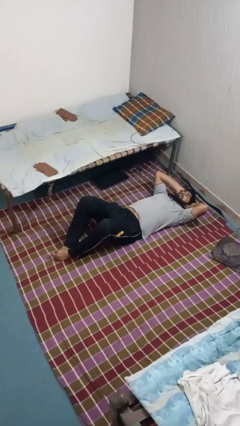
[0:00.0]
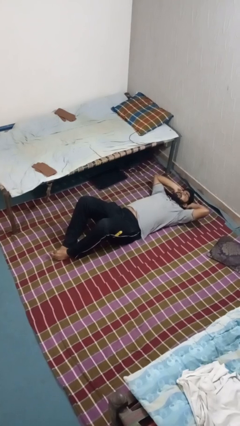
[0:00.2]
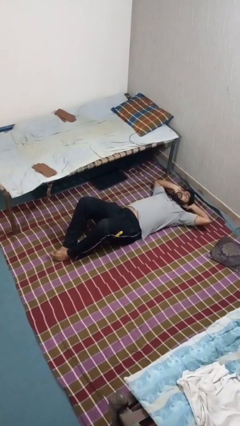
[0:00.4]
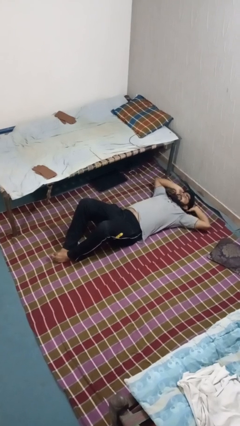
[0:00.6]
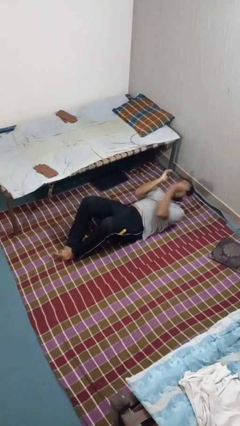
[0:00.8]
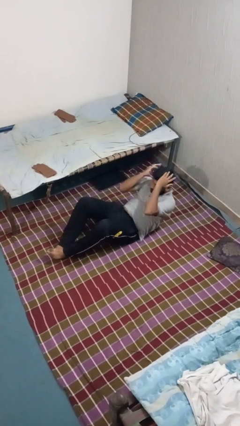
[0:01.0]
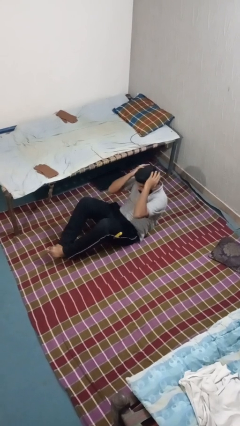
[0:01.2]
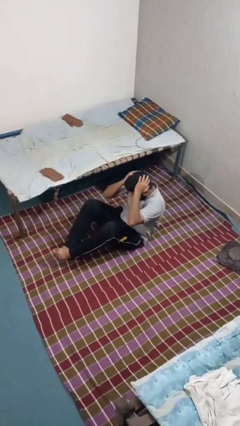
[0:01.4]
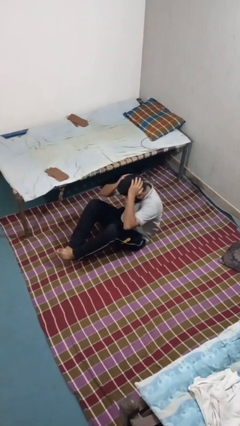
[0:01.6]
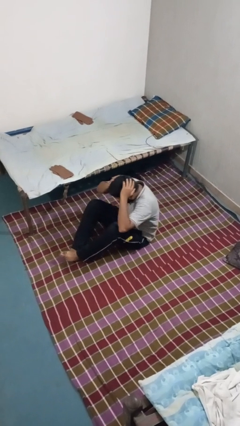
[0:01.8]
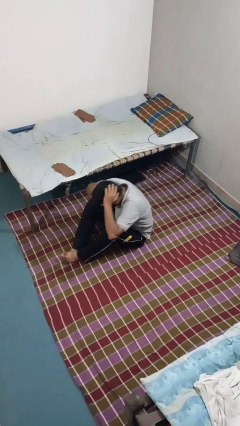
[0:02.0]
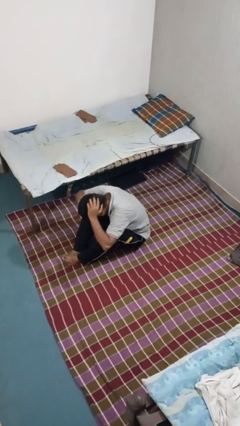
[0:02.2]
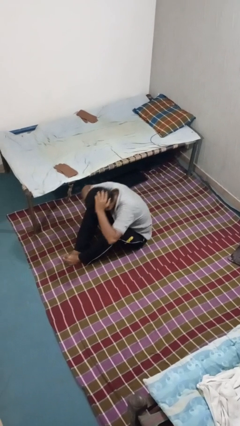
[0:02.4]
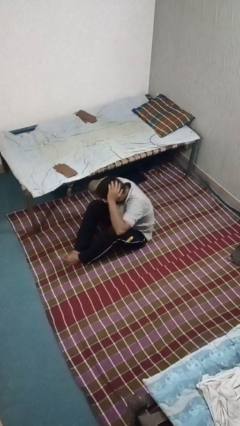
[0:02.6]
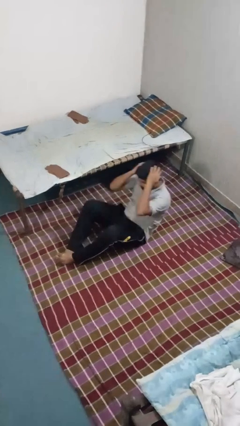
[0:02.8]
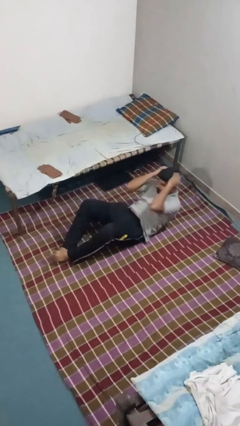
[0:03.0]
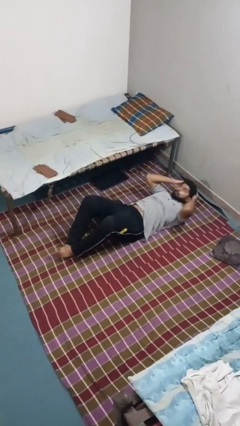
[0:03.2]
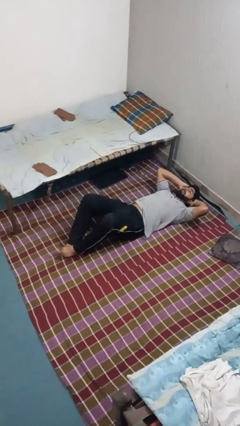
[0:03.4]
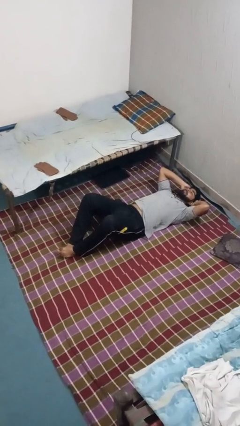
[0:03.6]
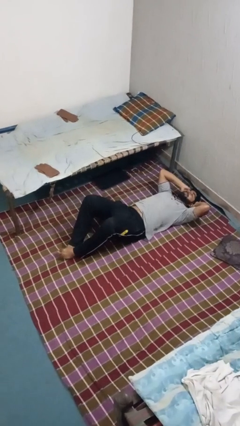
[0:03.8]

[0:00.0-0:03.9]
person exercises with situp

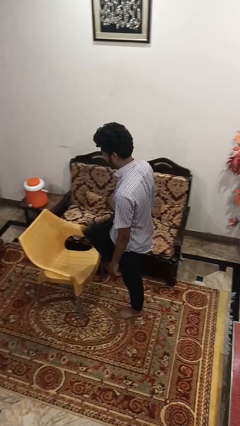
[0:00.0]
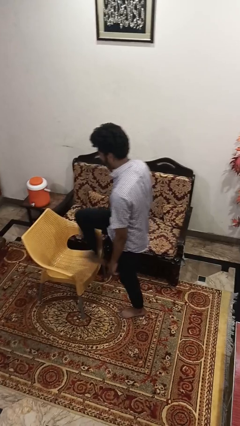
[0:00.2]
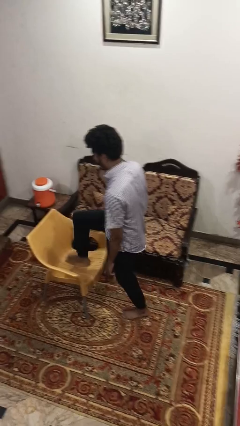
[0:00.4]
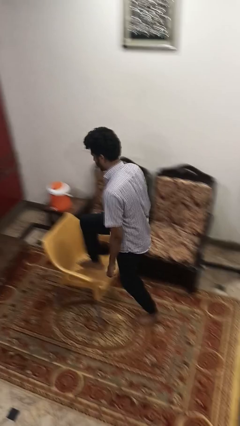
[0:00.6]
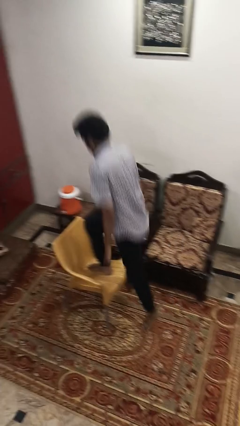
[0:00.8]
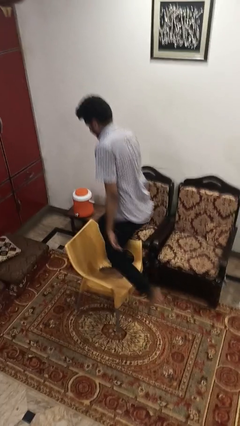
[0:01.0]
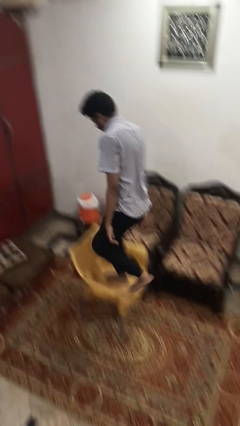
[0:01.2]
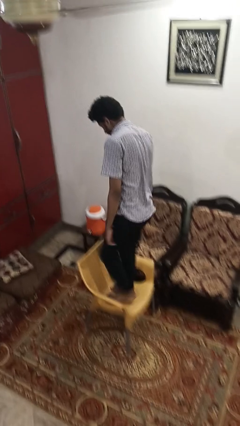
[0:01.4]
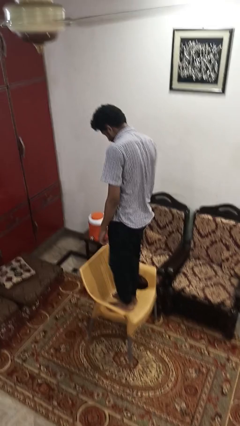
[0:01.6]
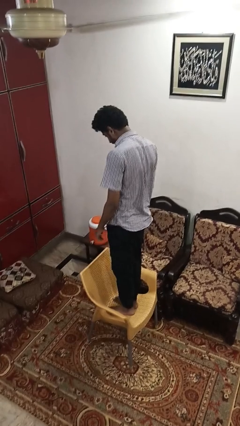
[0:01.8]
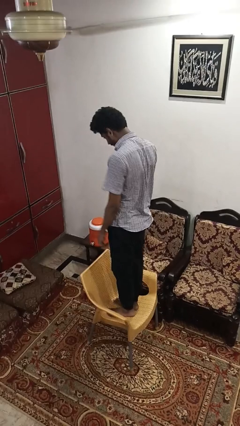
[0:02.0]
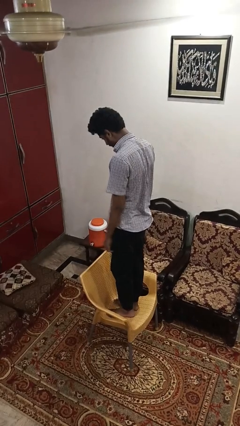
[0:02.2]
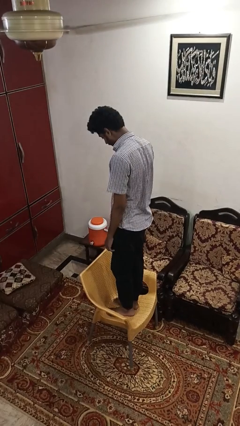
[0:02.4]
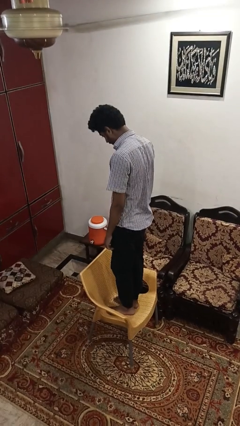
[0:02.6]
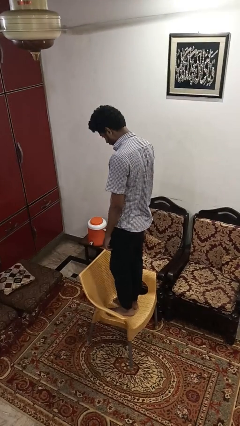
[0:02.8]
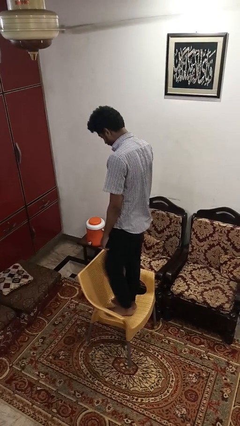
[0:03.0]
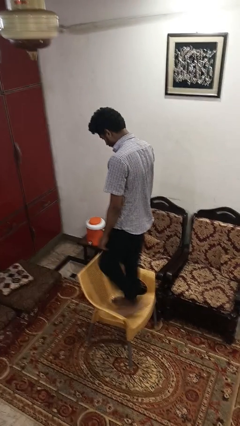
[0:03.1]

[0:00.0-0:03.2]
person climbs on chair

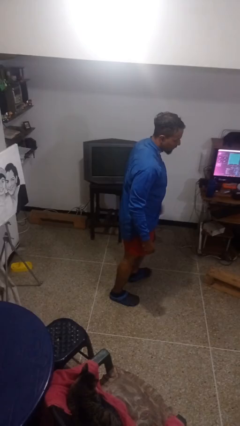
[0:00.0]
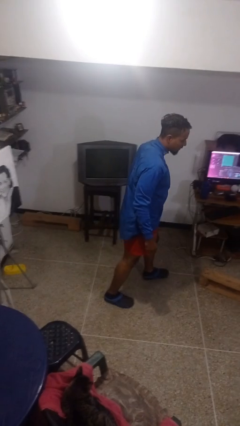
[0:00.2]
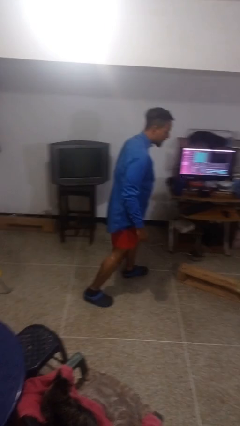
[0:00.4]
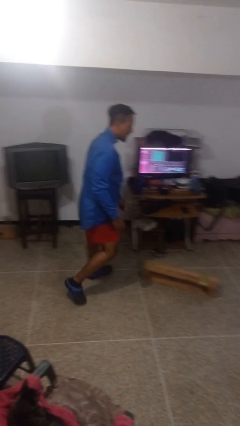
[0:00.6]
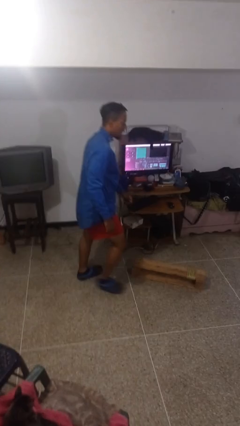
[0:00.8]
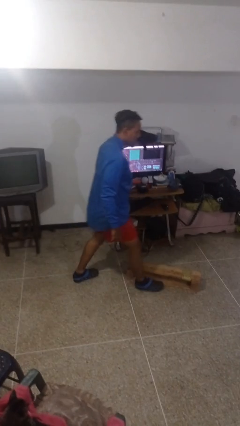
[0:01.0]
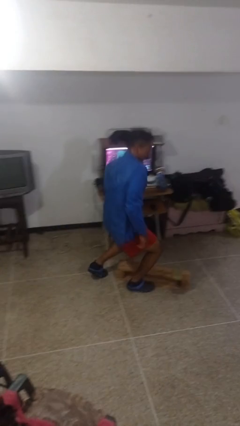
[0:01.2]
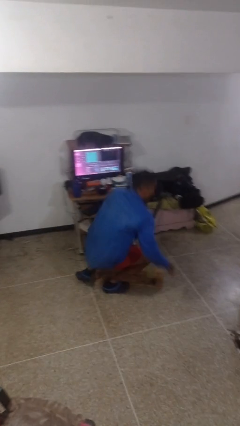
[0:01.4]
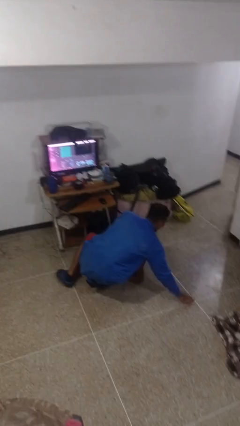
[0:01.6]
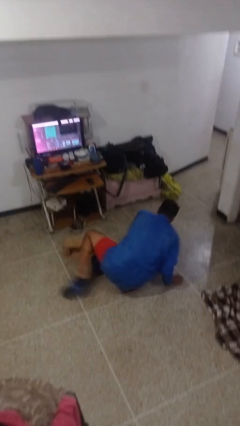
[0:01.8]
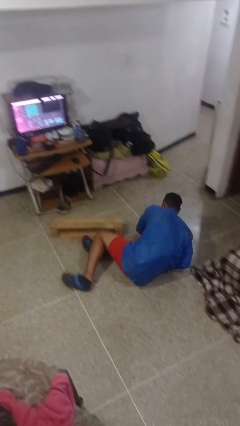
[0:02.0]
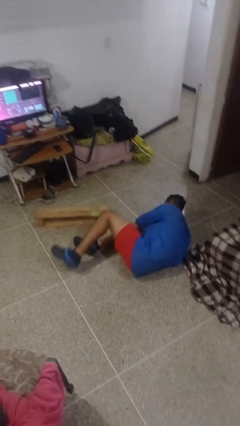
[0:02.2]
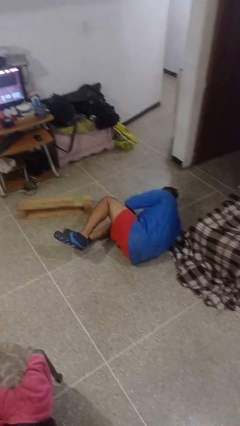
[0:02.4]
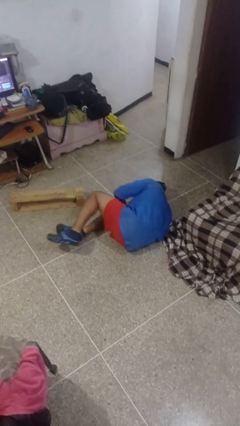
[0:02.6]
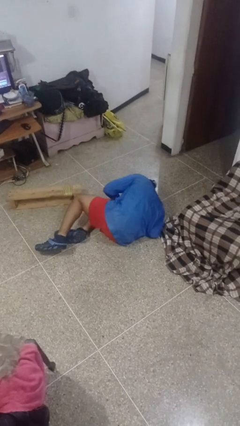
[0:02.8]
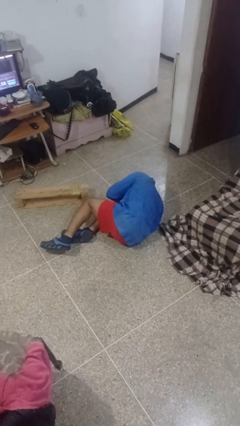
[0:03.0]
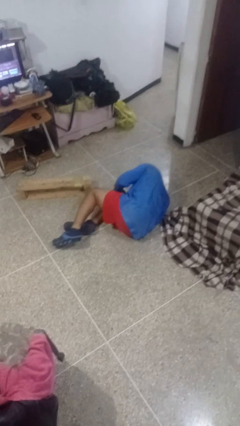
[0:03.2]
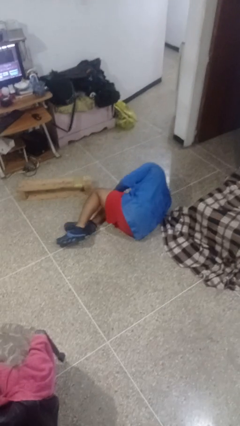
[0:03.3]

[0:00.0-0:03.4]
person trips on object on floor

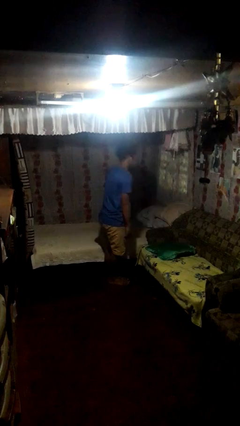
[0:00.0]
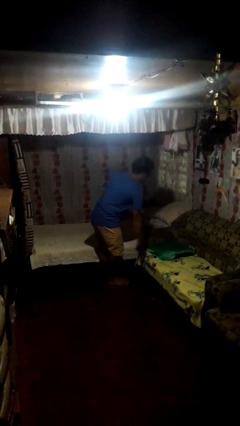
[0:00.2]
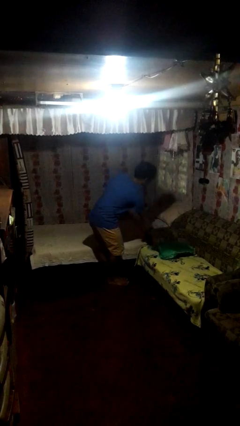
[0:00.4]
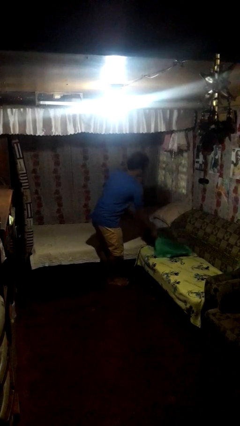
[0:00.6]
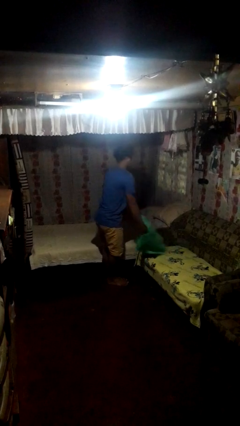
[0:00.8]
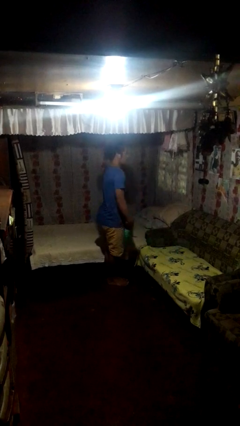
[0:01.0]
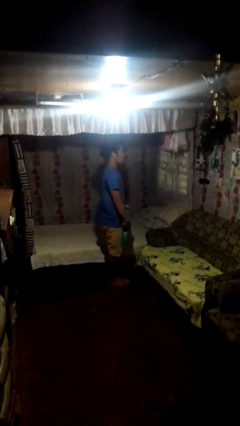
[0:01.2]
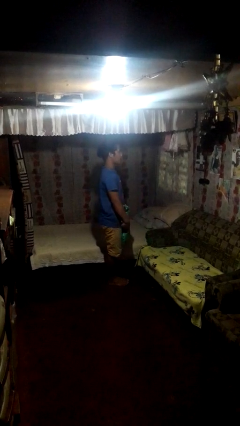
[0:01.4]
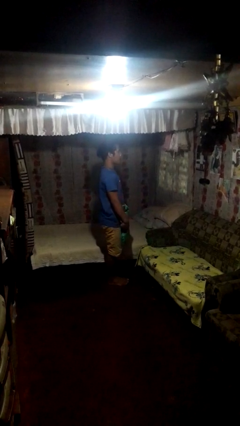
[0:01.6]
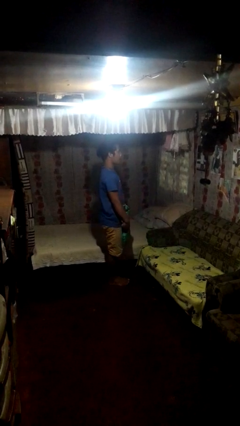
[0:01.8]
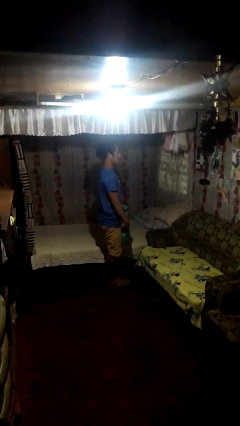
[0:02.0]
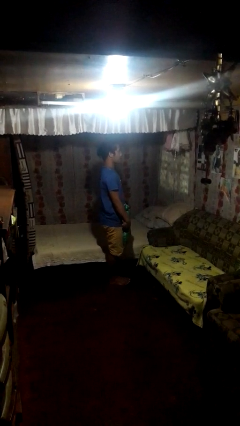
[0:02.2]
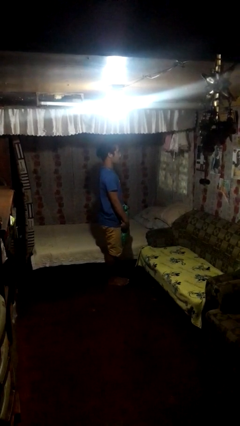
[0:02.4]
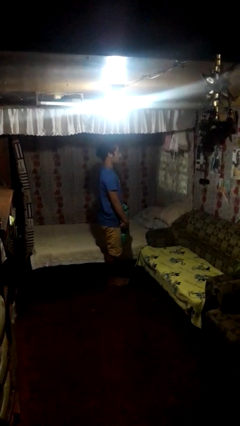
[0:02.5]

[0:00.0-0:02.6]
person picks up object from couch

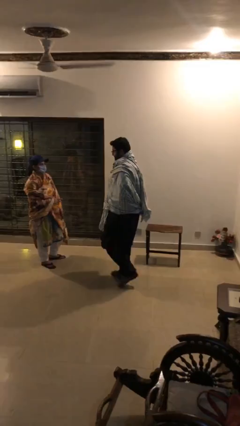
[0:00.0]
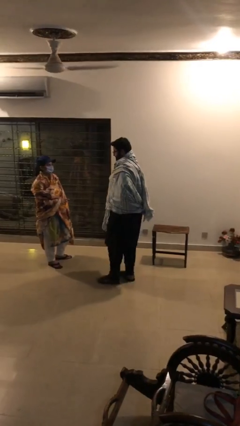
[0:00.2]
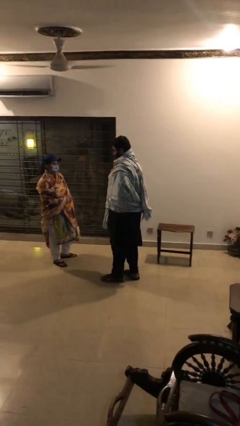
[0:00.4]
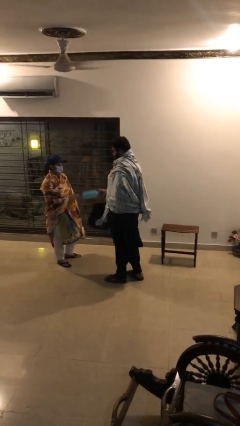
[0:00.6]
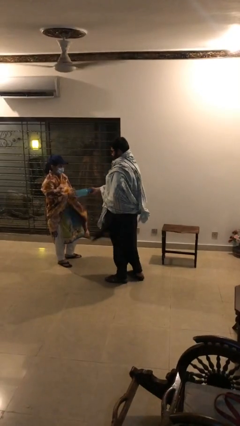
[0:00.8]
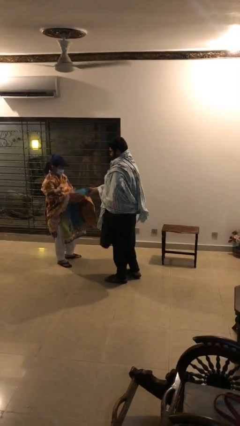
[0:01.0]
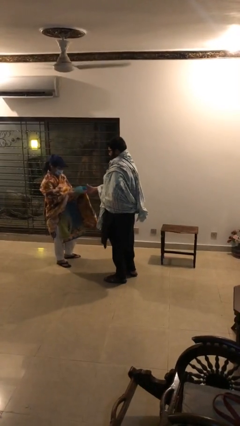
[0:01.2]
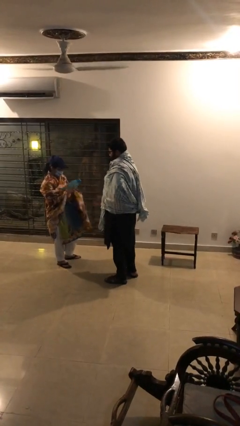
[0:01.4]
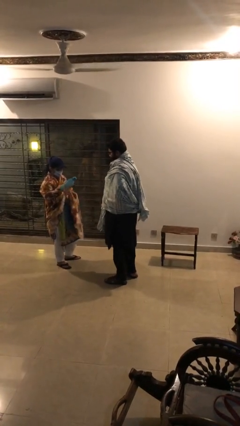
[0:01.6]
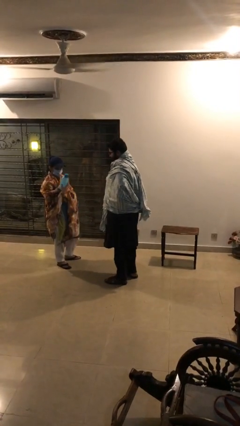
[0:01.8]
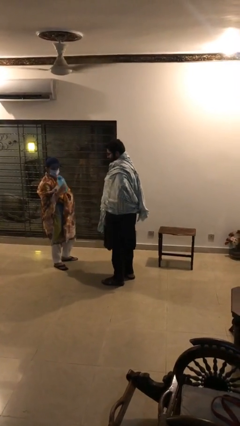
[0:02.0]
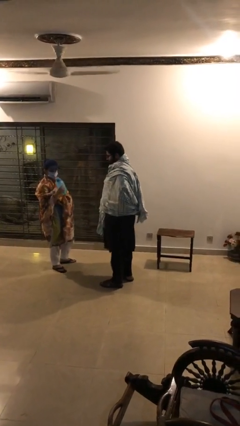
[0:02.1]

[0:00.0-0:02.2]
person transfers object to person

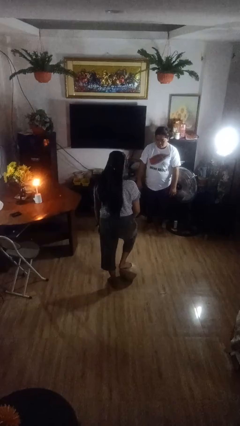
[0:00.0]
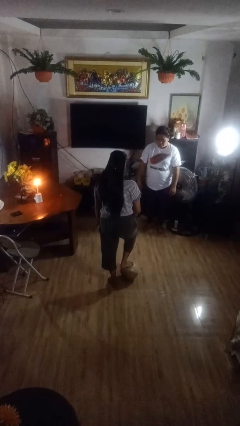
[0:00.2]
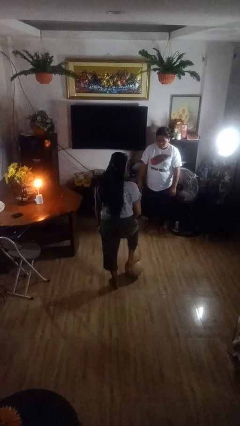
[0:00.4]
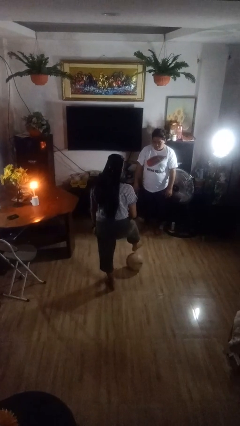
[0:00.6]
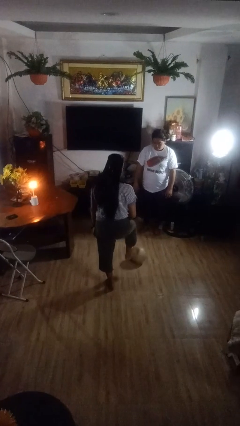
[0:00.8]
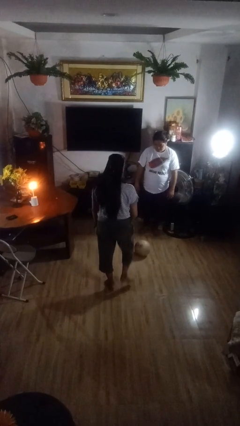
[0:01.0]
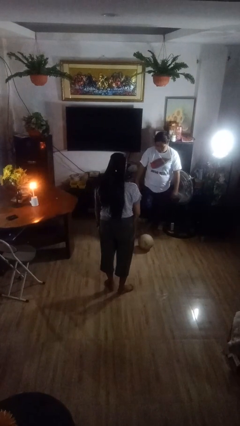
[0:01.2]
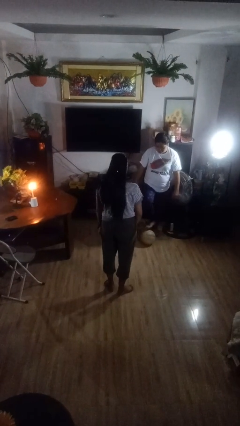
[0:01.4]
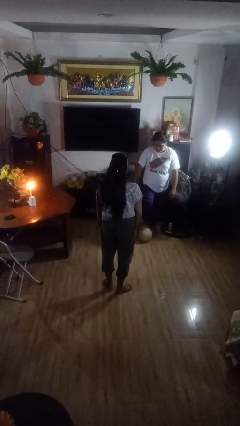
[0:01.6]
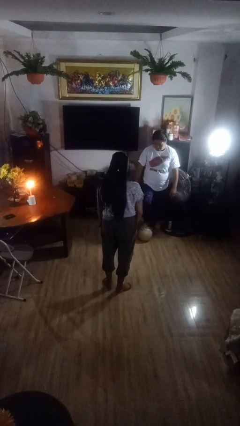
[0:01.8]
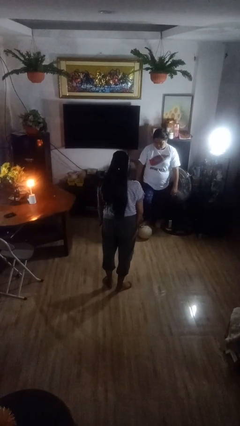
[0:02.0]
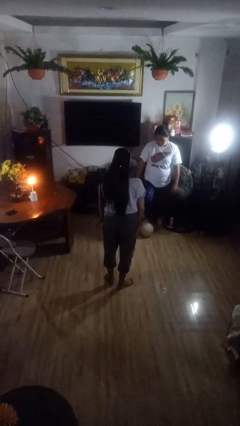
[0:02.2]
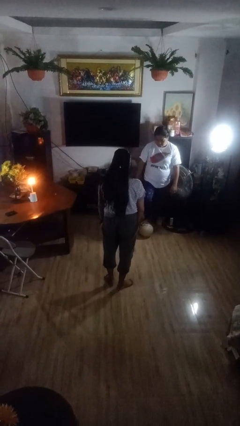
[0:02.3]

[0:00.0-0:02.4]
person kicks object to person
